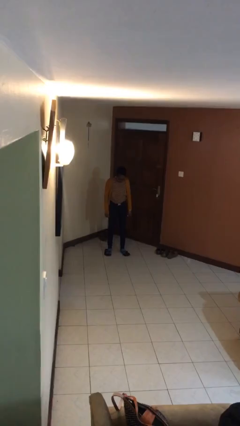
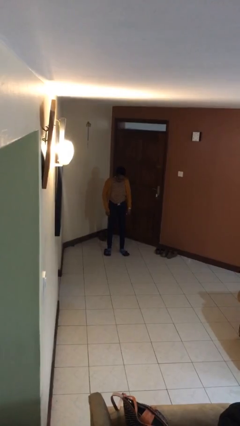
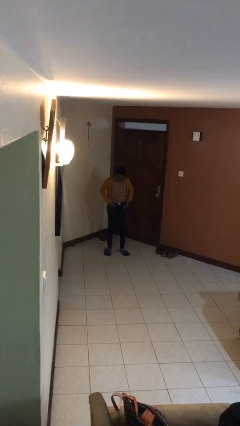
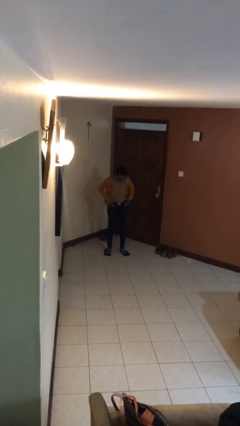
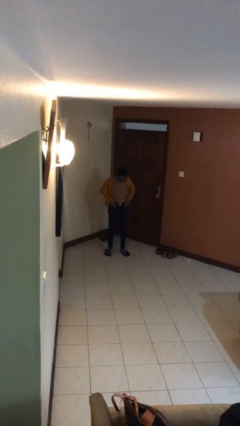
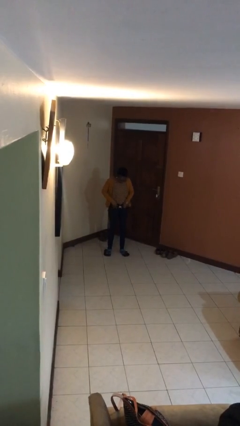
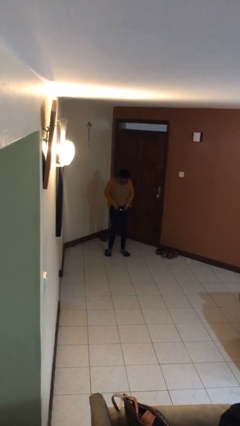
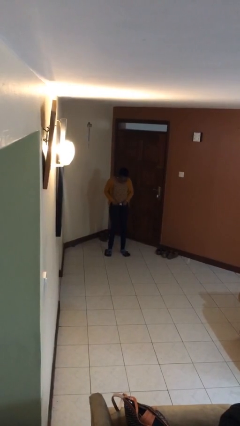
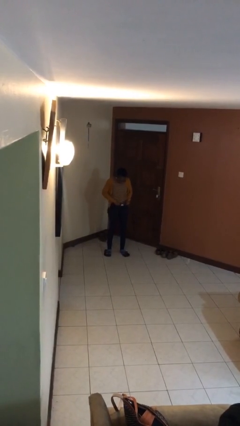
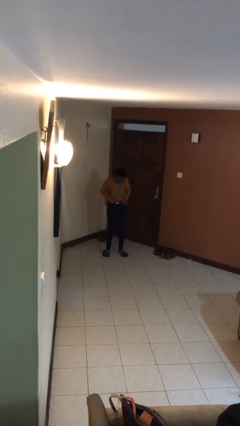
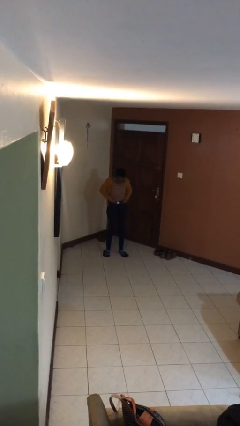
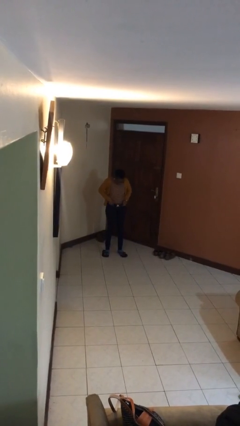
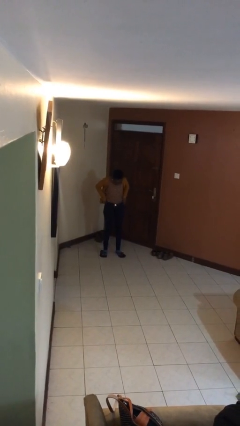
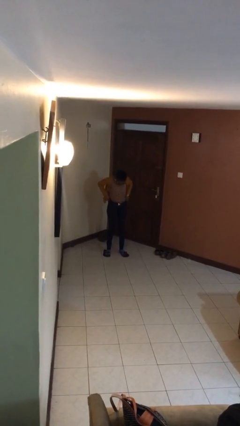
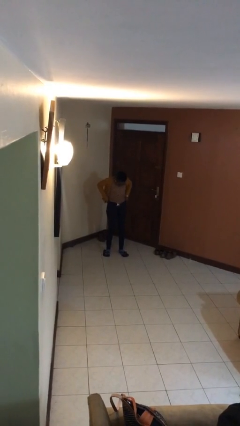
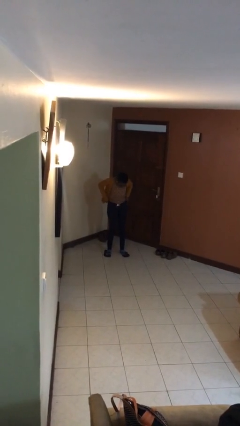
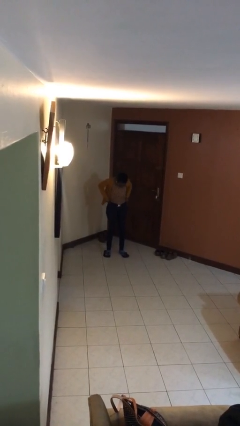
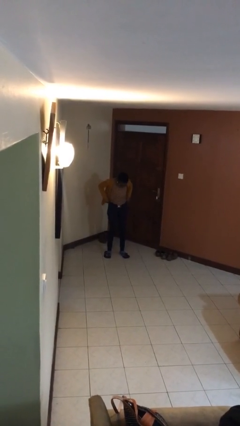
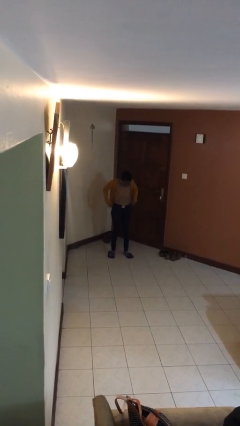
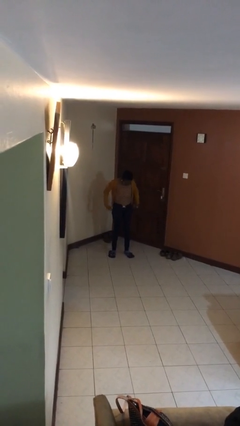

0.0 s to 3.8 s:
person hikes up pants

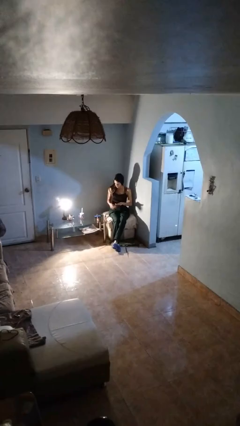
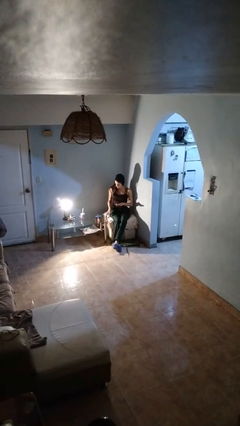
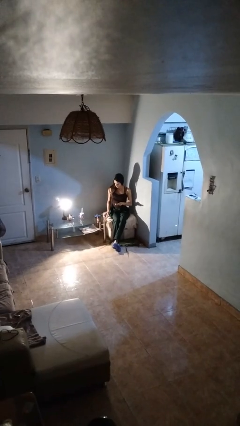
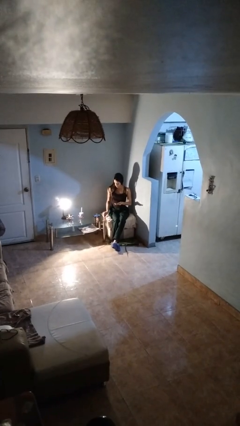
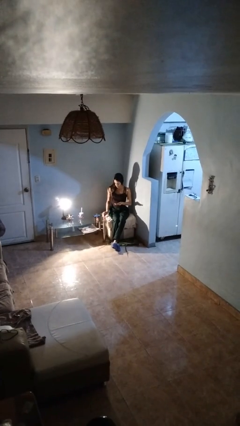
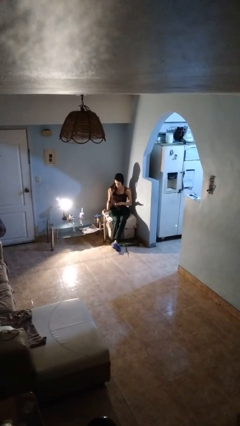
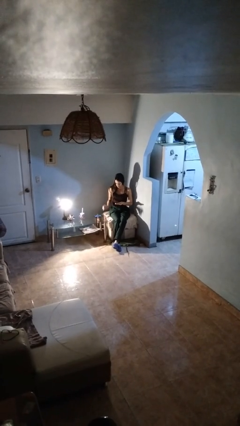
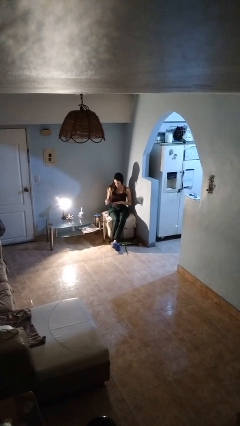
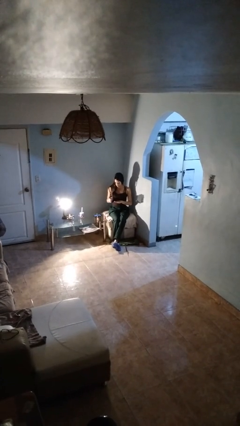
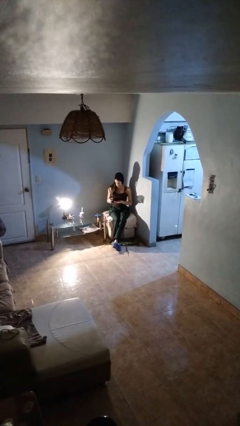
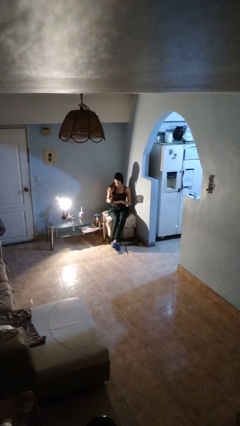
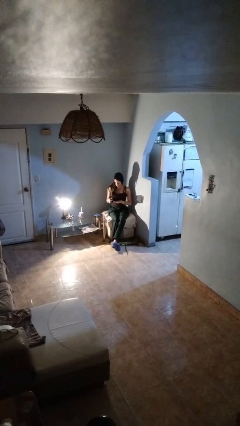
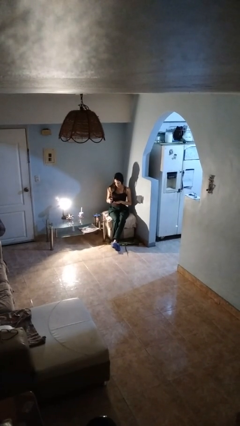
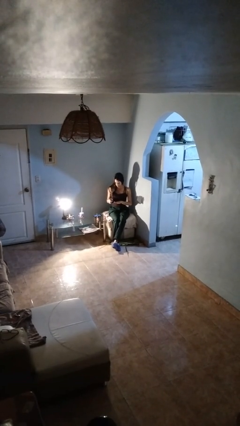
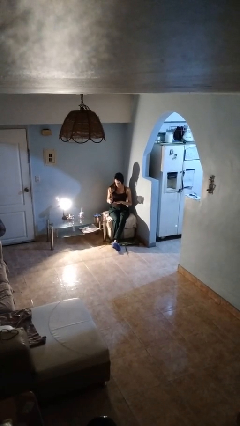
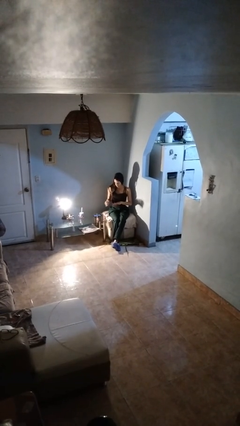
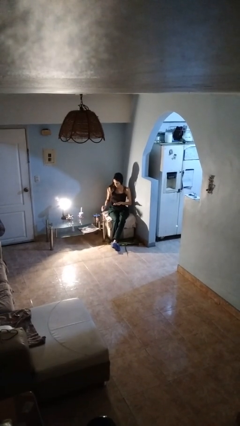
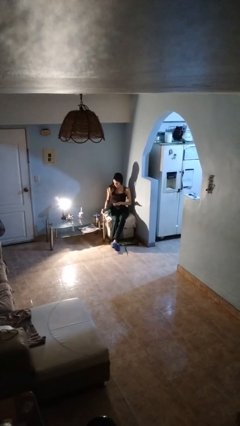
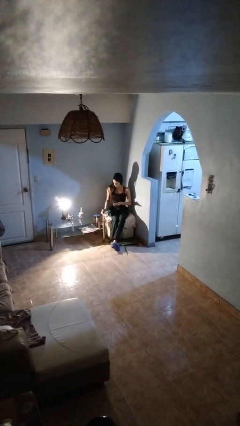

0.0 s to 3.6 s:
person paints fingernails

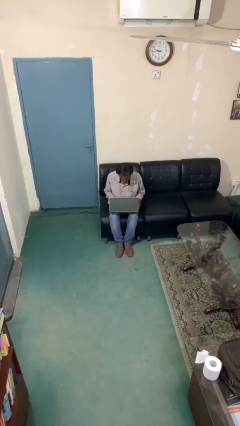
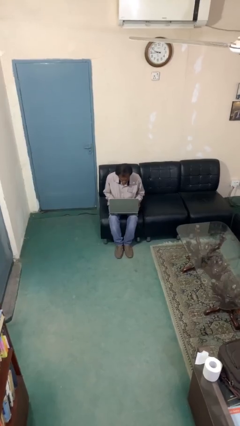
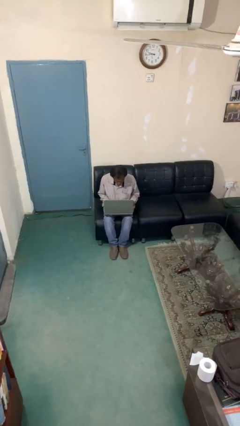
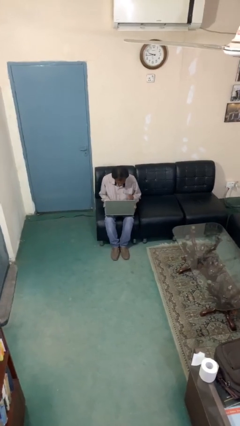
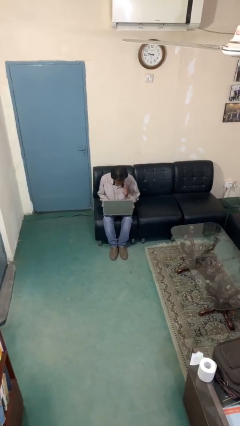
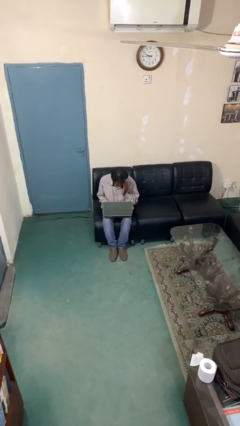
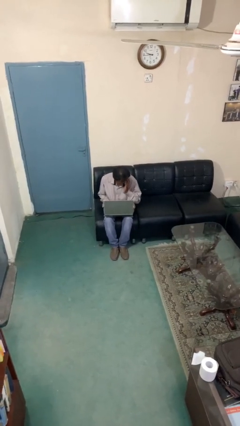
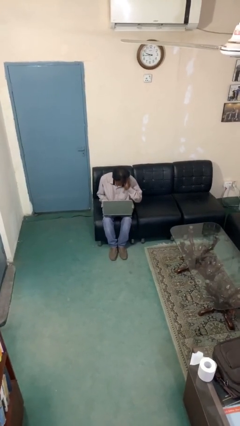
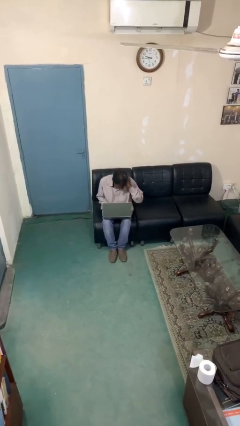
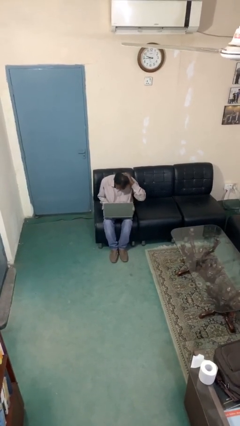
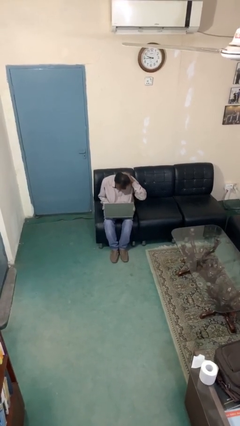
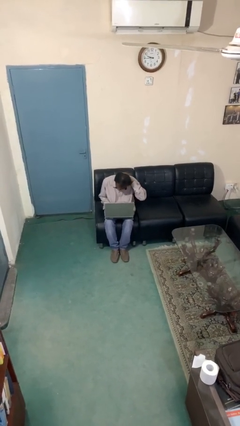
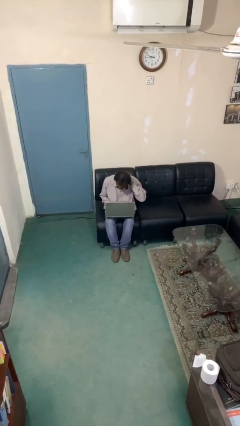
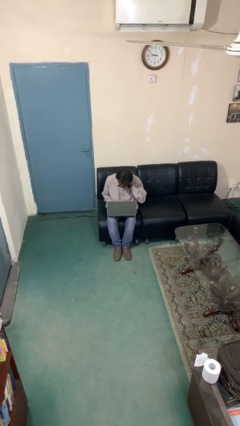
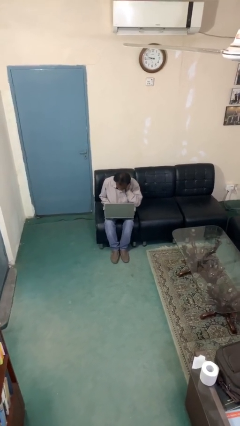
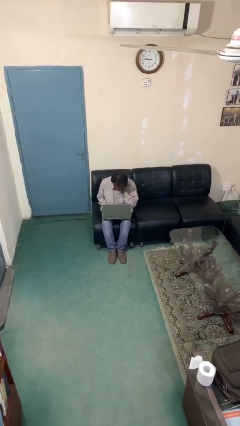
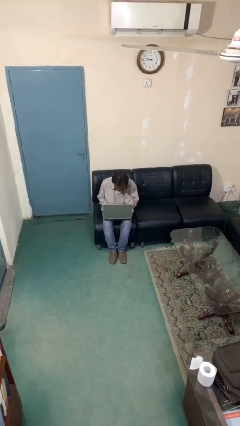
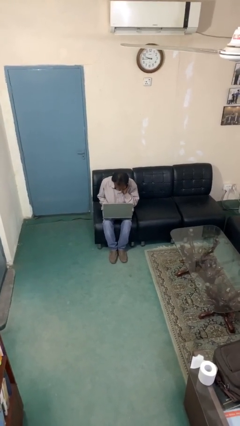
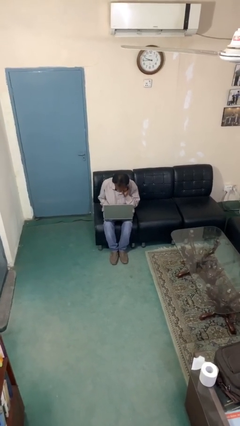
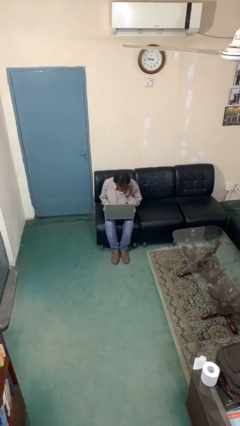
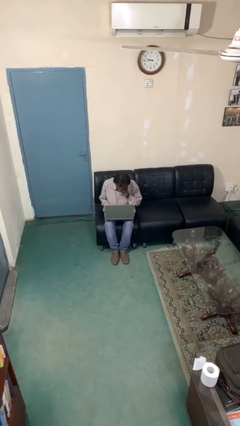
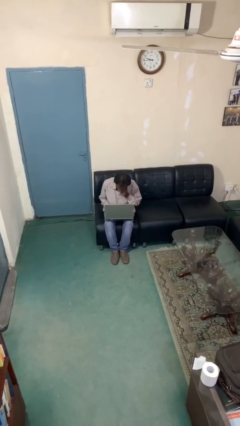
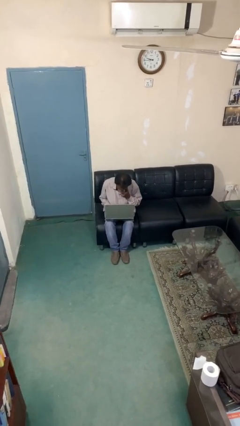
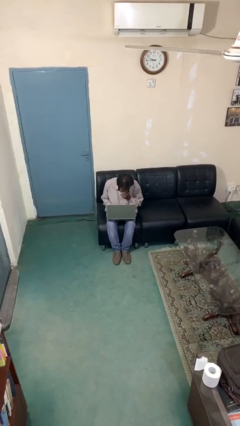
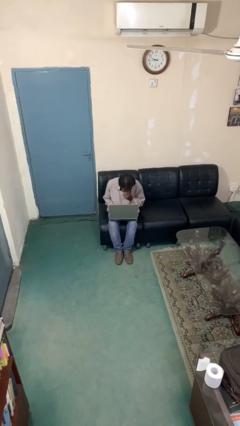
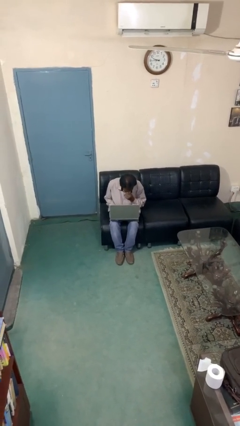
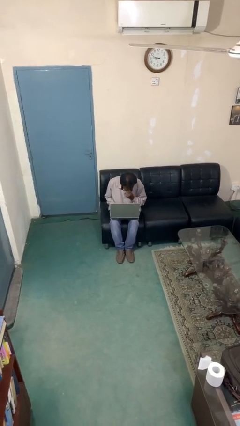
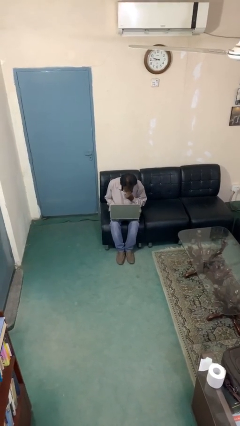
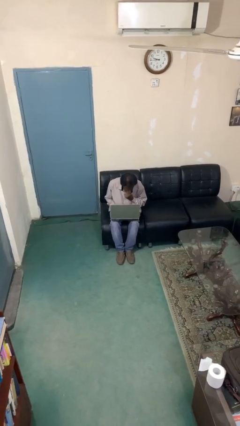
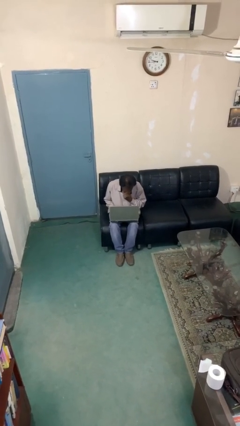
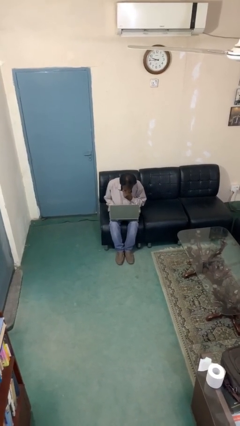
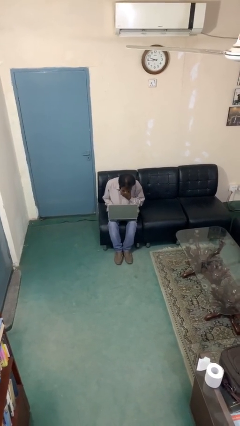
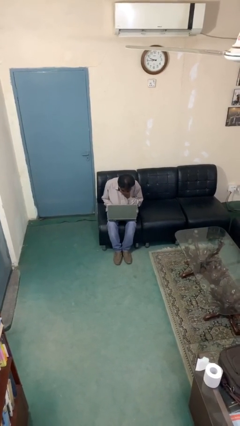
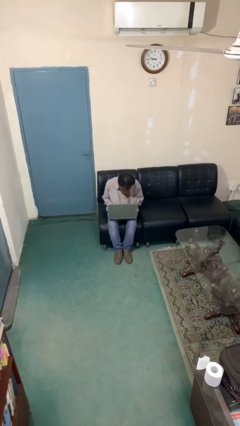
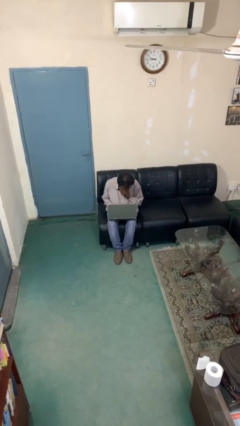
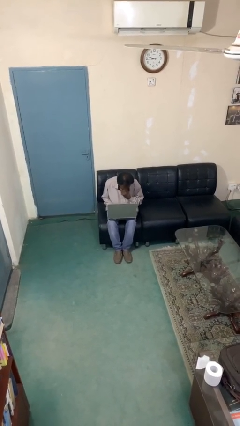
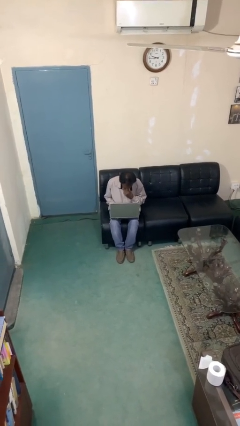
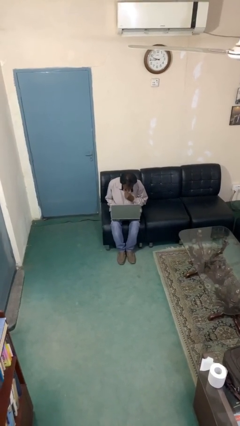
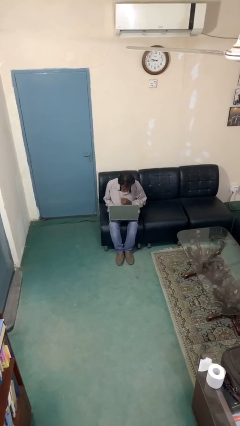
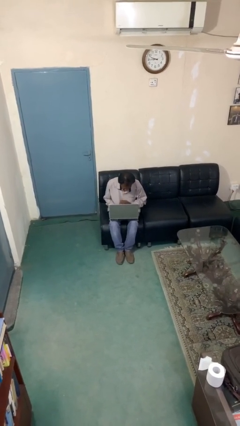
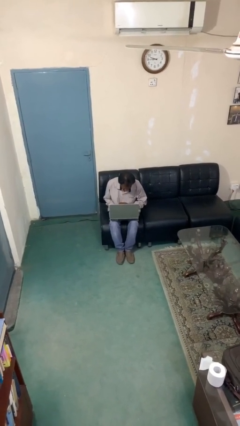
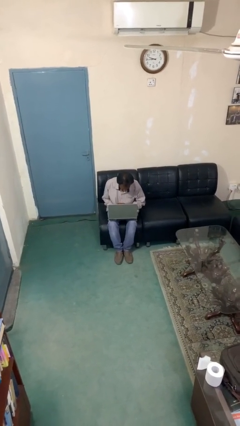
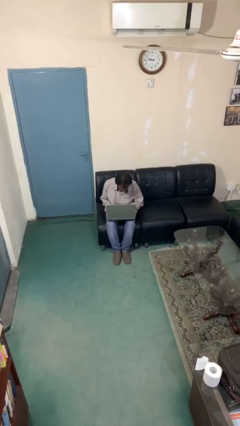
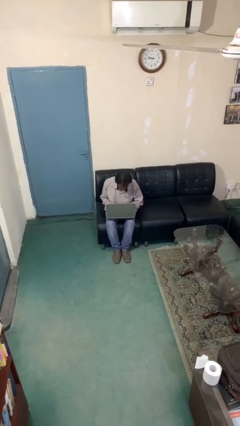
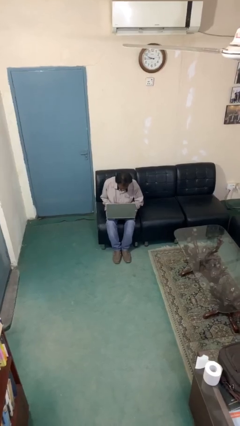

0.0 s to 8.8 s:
person interacts with laptop

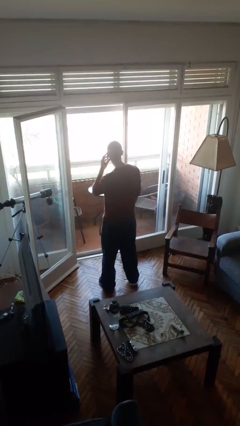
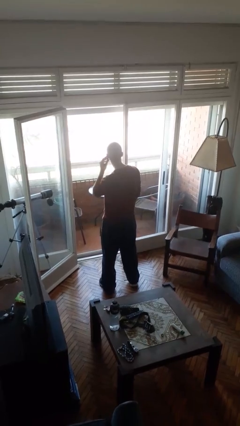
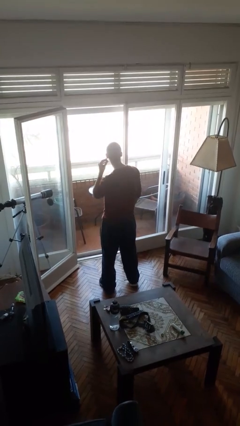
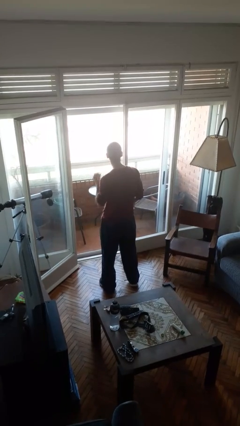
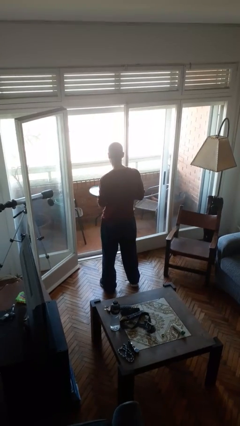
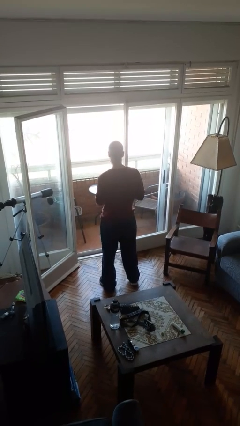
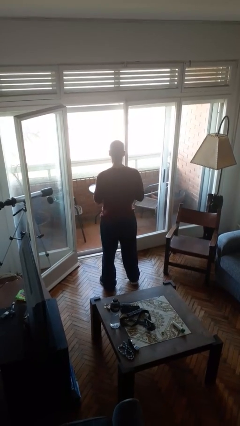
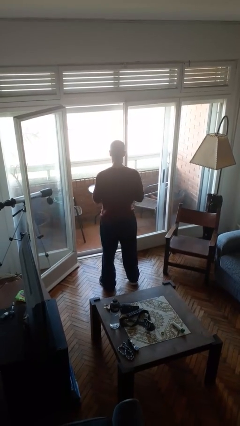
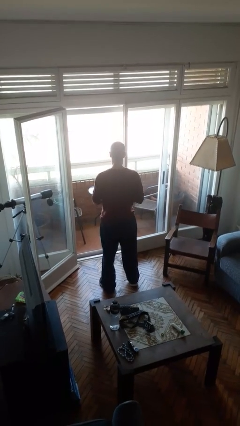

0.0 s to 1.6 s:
person takes off earrings
